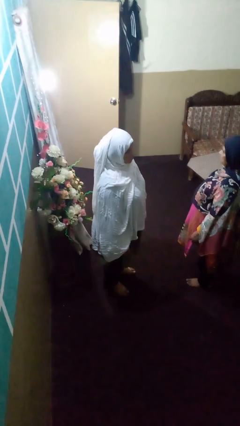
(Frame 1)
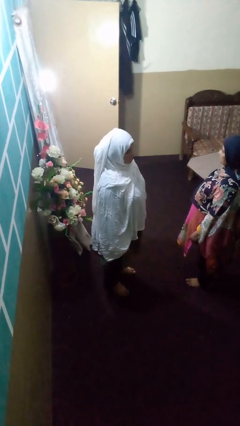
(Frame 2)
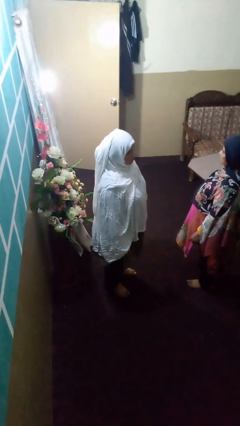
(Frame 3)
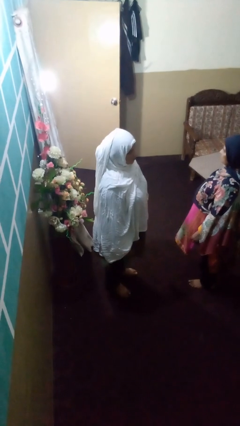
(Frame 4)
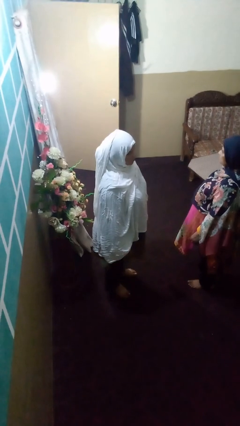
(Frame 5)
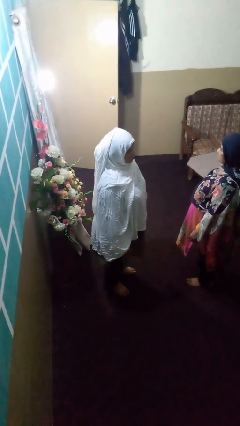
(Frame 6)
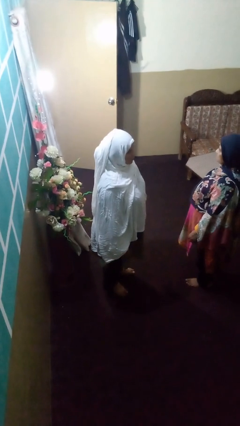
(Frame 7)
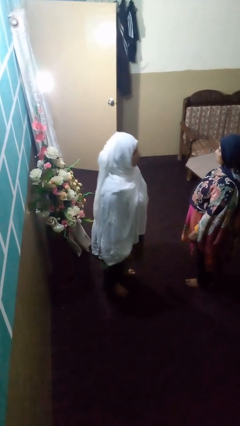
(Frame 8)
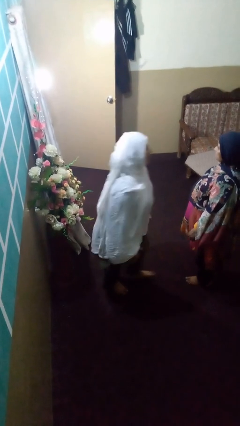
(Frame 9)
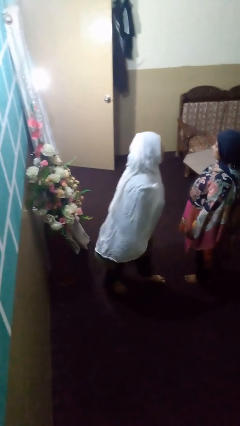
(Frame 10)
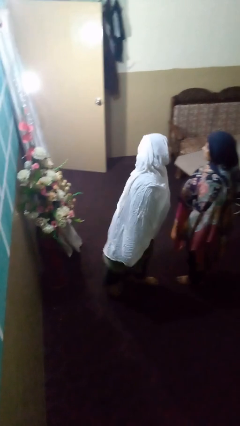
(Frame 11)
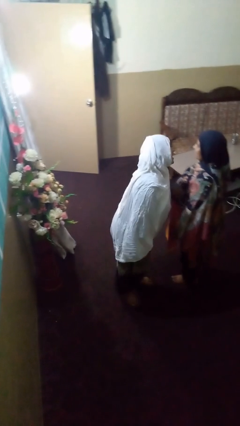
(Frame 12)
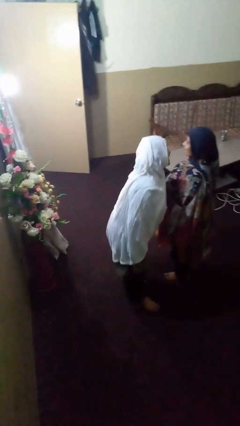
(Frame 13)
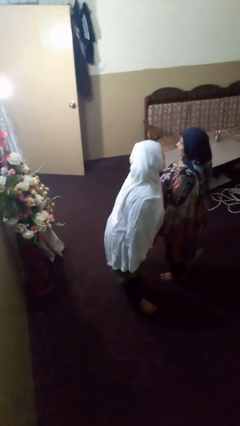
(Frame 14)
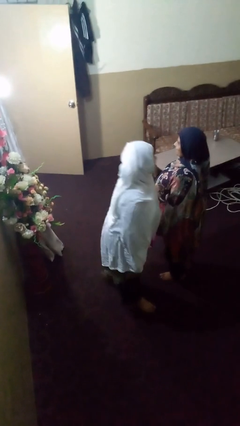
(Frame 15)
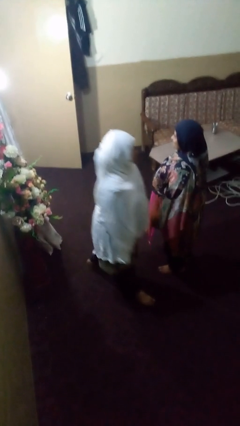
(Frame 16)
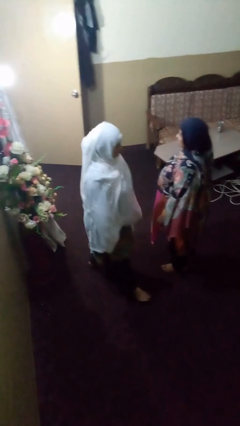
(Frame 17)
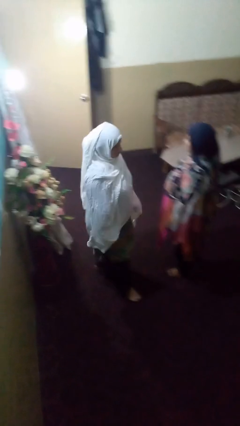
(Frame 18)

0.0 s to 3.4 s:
person laughs with person

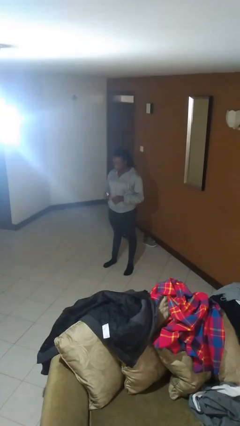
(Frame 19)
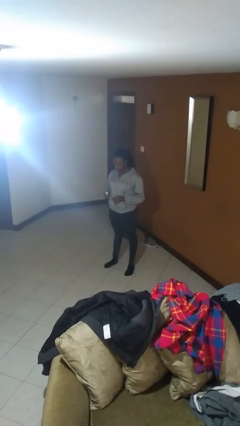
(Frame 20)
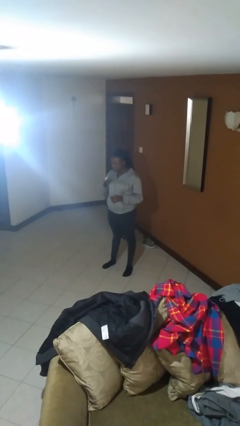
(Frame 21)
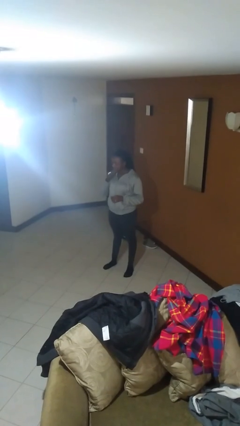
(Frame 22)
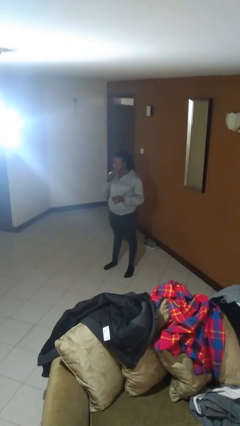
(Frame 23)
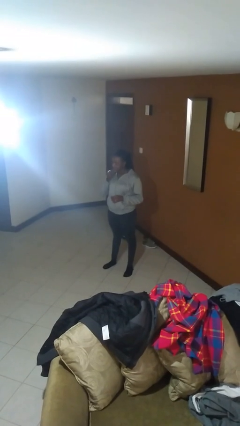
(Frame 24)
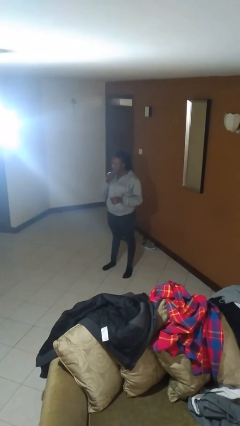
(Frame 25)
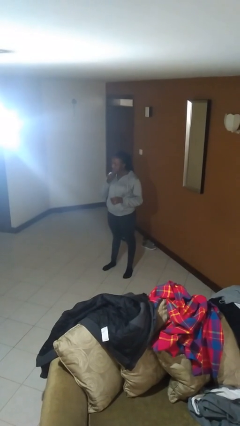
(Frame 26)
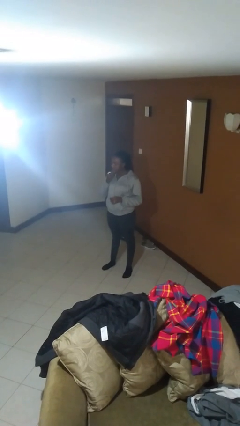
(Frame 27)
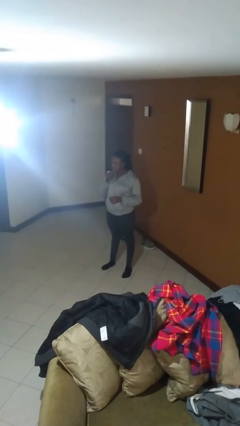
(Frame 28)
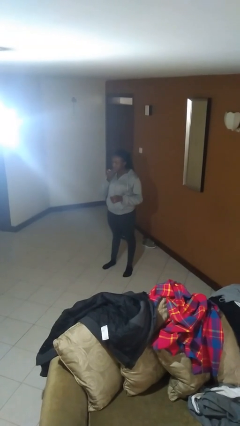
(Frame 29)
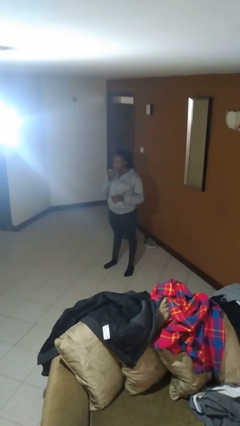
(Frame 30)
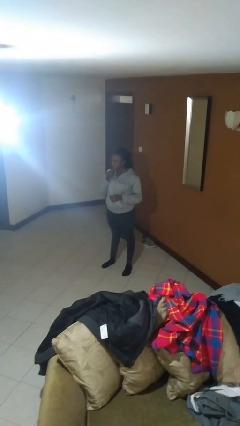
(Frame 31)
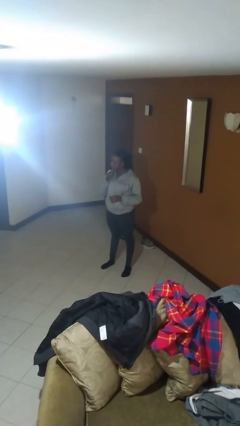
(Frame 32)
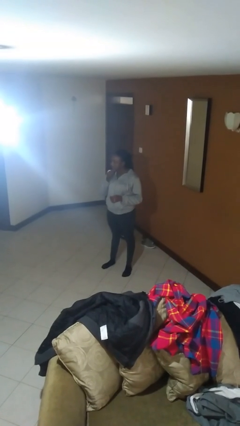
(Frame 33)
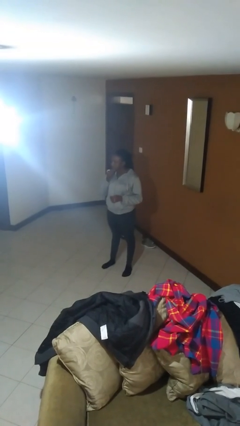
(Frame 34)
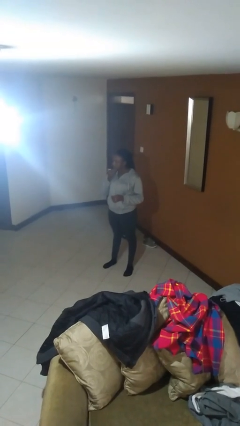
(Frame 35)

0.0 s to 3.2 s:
person applies lip makeup

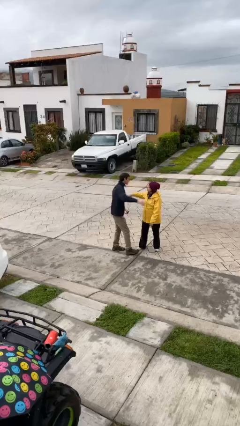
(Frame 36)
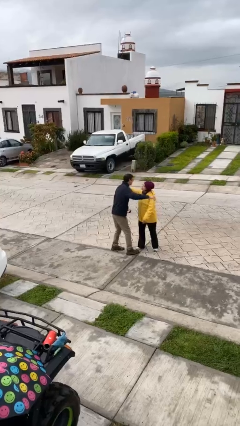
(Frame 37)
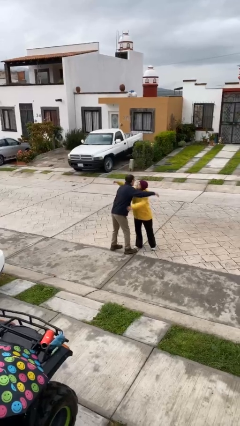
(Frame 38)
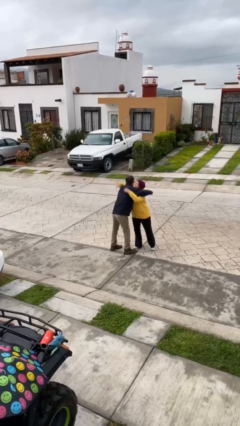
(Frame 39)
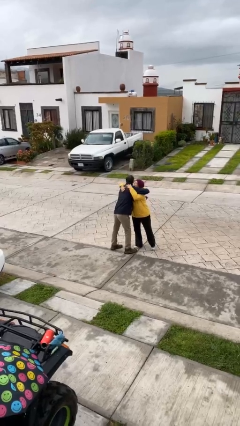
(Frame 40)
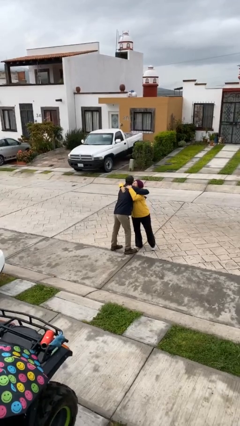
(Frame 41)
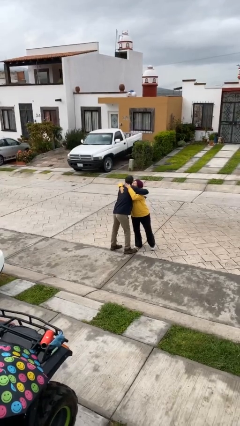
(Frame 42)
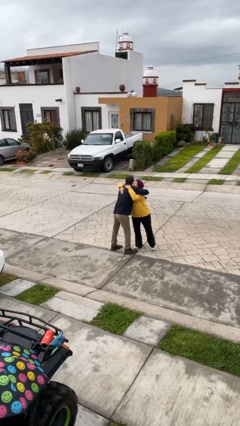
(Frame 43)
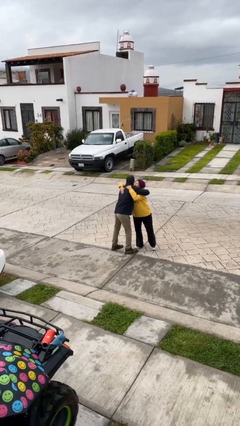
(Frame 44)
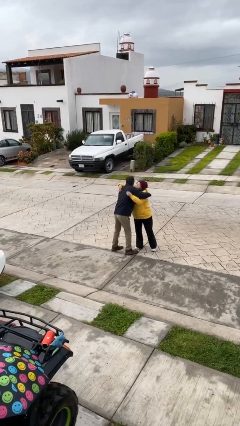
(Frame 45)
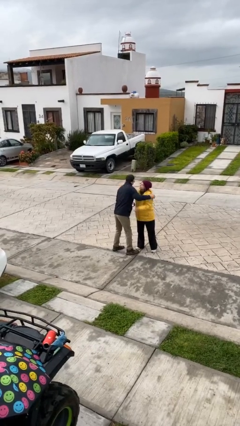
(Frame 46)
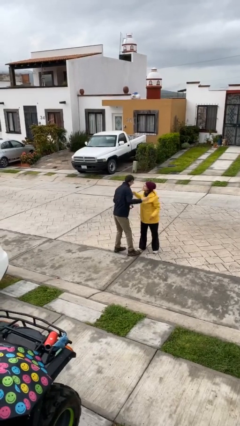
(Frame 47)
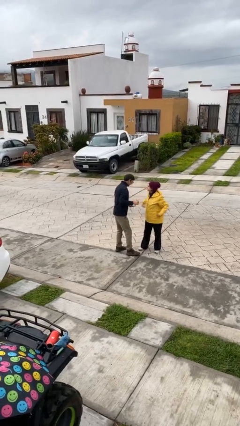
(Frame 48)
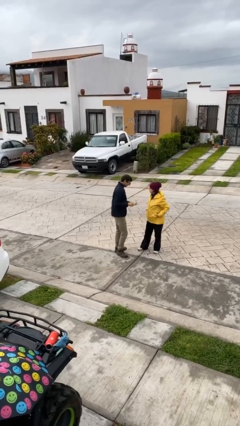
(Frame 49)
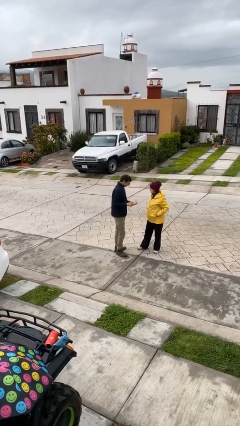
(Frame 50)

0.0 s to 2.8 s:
person embraces person

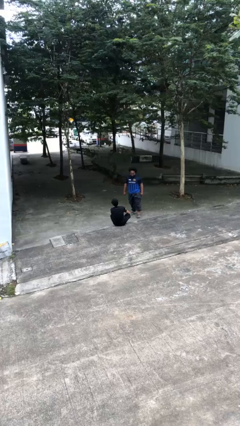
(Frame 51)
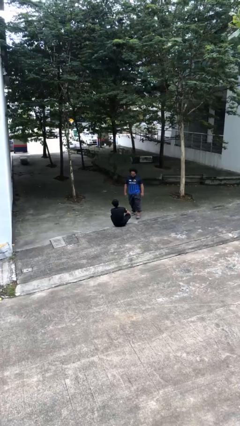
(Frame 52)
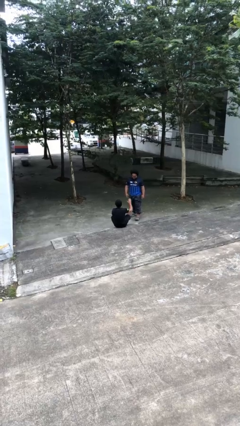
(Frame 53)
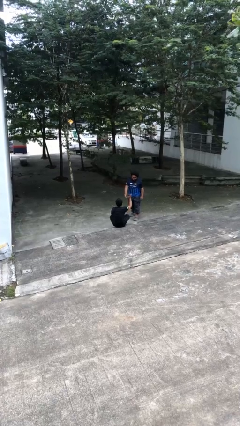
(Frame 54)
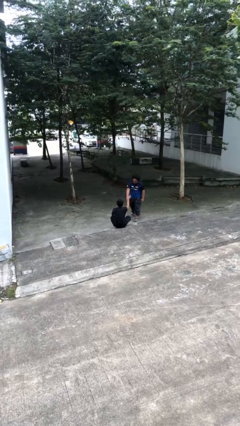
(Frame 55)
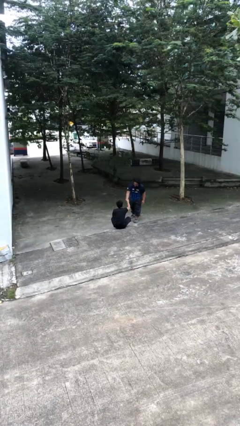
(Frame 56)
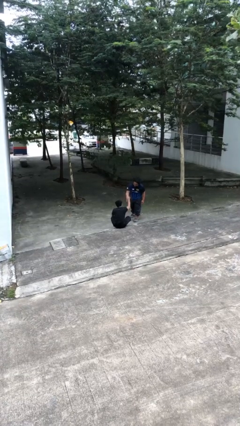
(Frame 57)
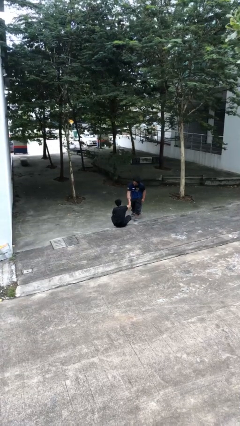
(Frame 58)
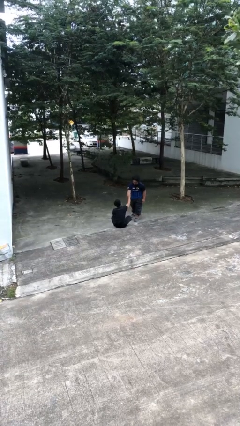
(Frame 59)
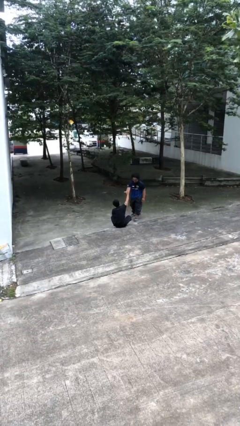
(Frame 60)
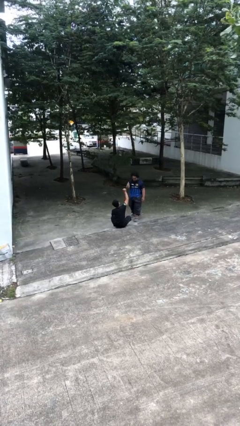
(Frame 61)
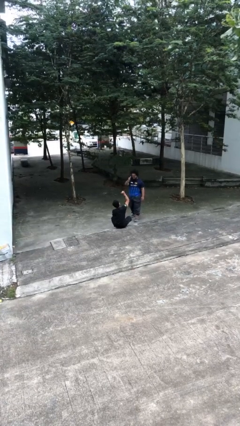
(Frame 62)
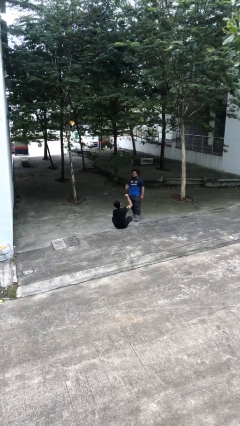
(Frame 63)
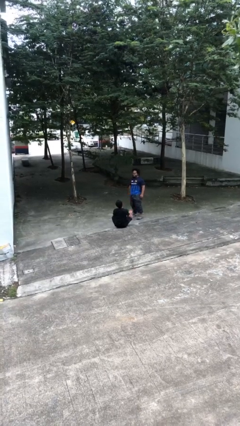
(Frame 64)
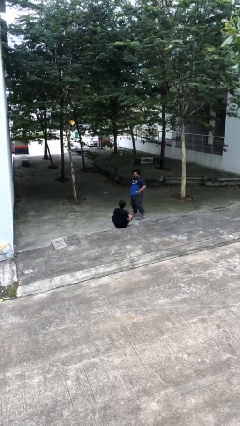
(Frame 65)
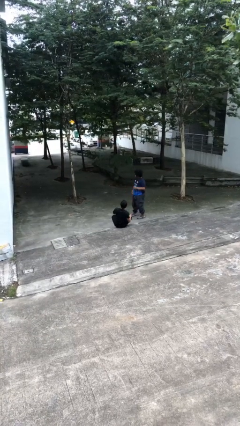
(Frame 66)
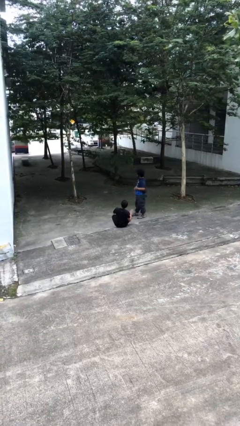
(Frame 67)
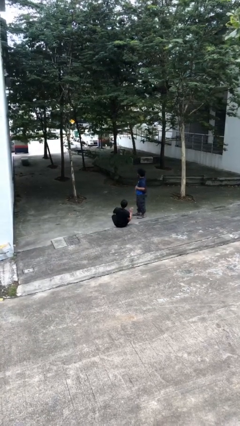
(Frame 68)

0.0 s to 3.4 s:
person shakes hand

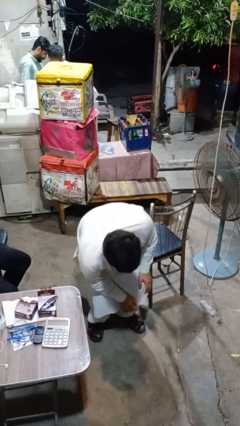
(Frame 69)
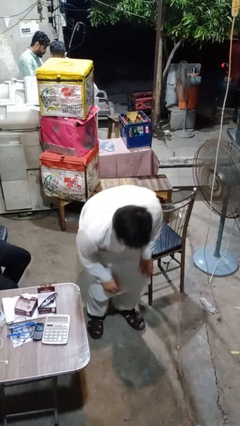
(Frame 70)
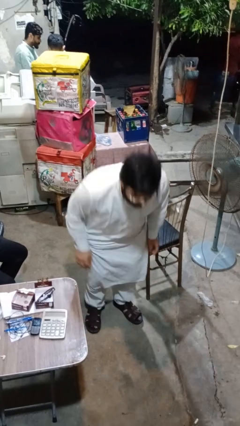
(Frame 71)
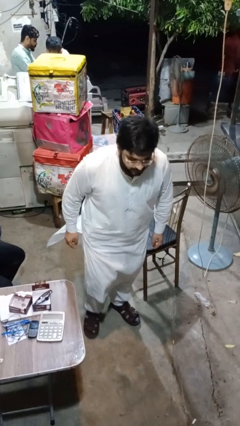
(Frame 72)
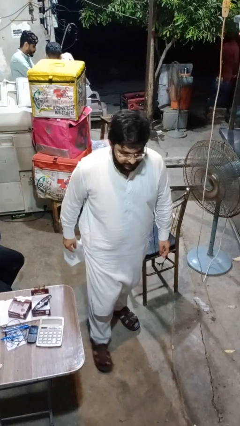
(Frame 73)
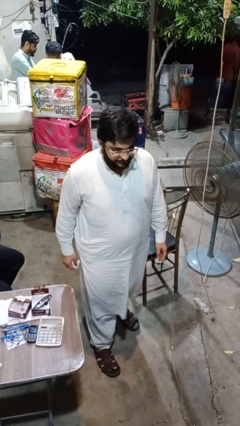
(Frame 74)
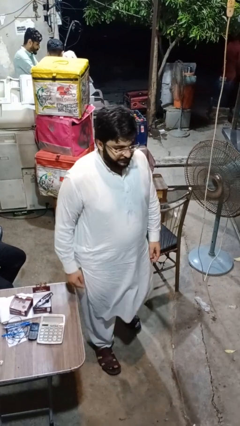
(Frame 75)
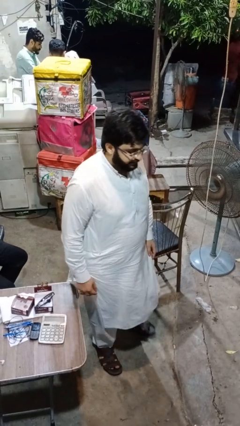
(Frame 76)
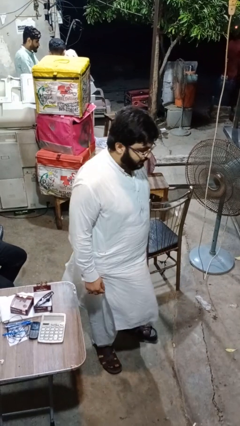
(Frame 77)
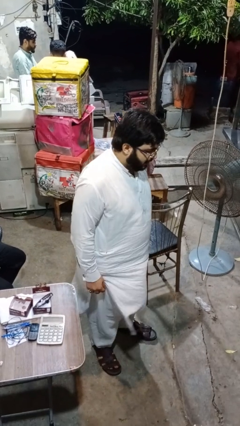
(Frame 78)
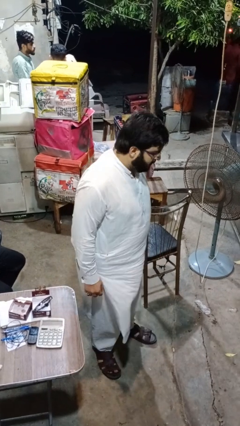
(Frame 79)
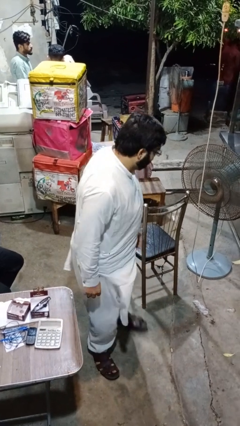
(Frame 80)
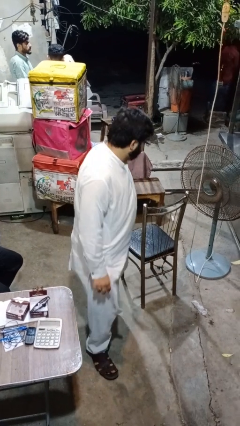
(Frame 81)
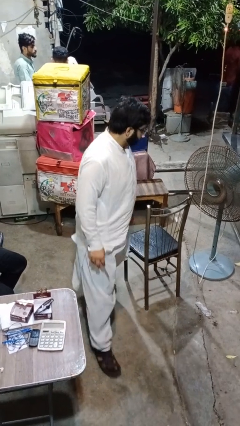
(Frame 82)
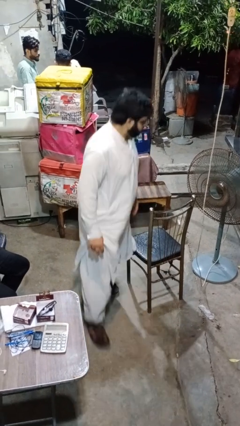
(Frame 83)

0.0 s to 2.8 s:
person stands up from floor

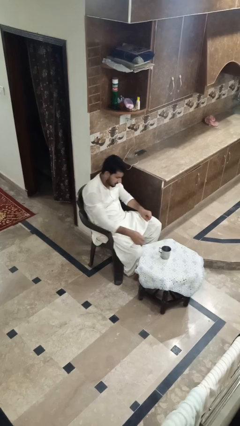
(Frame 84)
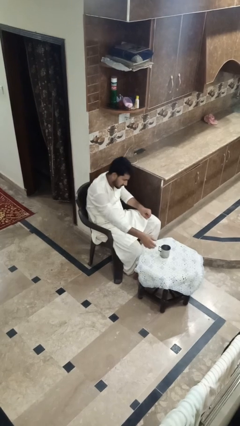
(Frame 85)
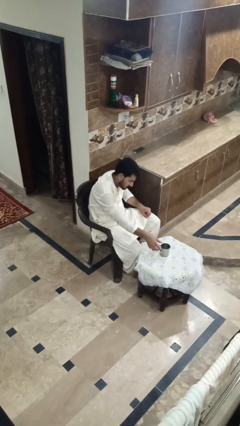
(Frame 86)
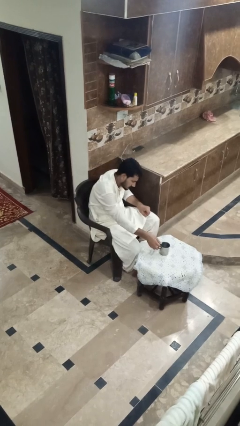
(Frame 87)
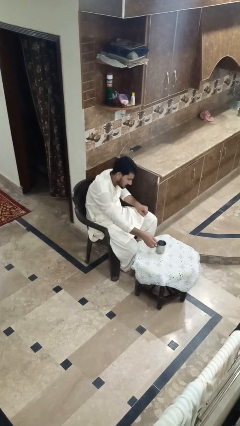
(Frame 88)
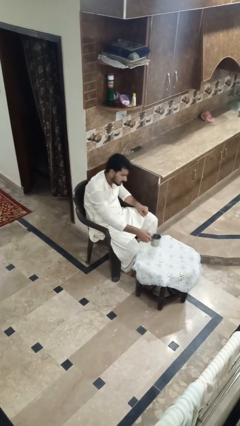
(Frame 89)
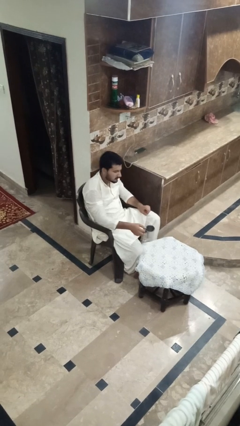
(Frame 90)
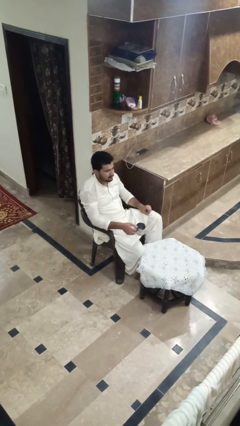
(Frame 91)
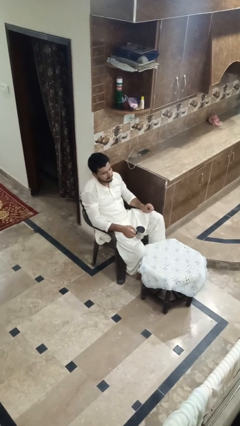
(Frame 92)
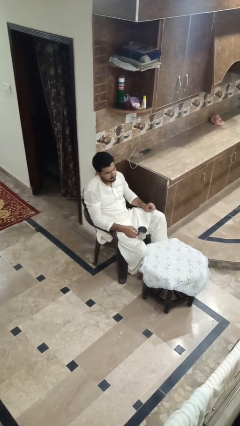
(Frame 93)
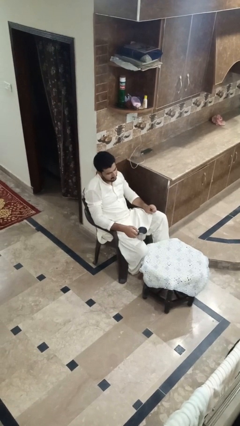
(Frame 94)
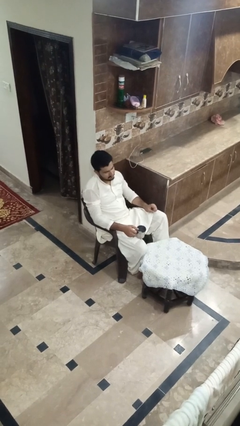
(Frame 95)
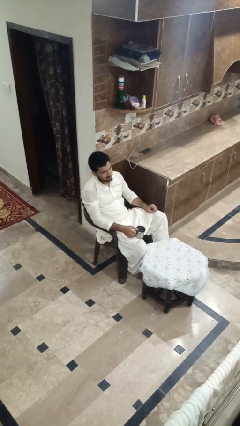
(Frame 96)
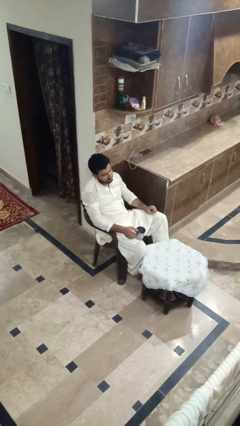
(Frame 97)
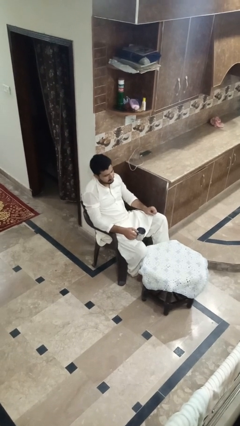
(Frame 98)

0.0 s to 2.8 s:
person picks up object from table
